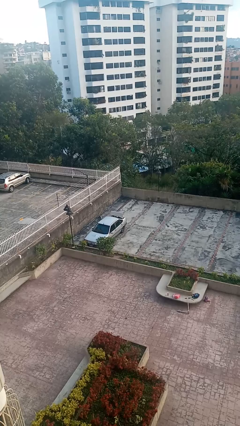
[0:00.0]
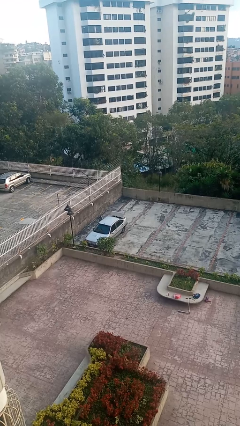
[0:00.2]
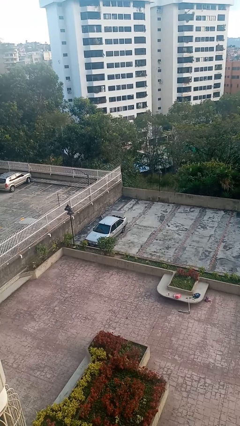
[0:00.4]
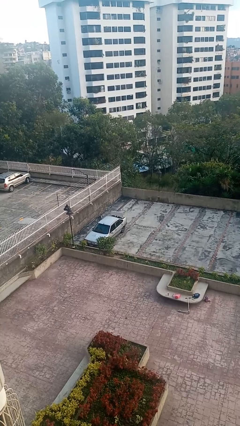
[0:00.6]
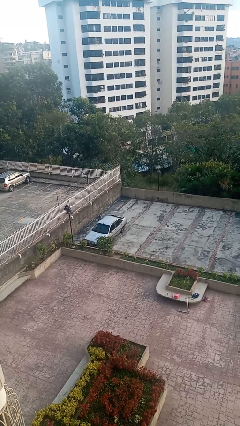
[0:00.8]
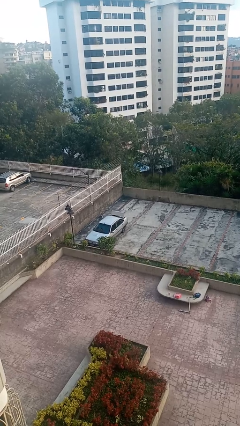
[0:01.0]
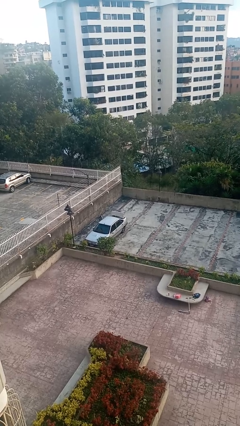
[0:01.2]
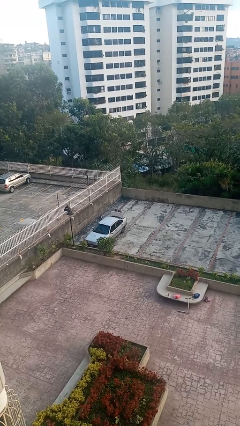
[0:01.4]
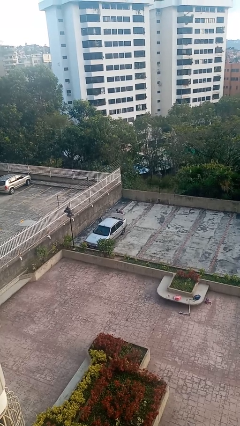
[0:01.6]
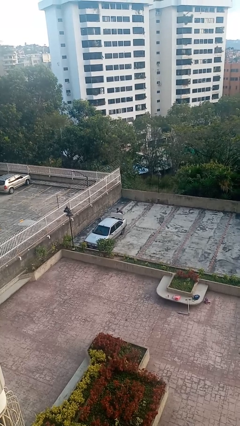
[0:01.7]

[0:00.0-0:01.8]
person unloads car

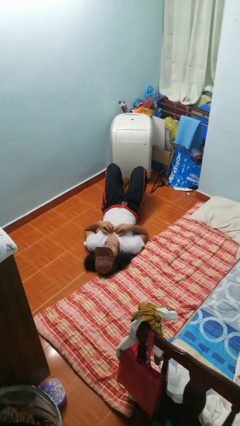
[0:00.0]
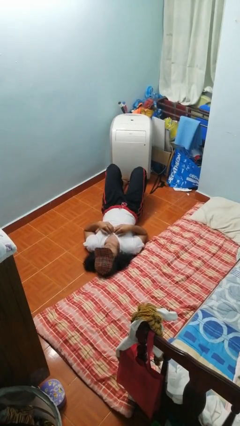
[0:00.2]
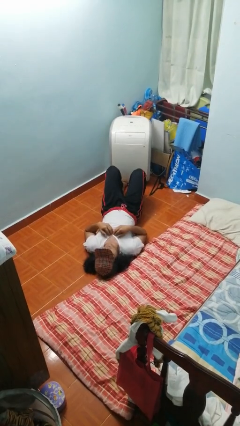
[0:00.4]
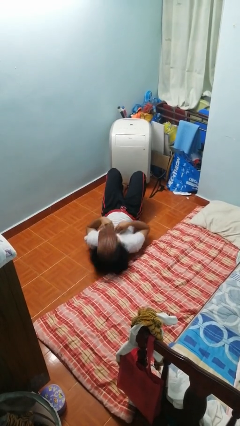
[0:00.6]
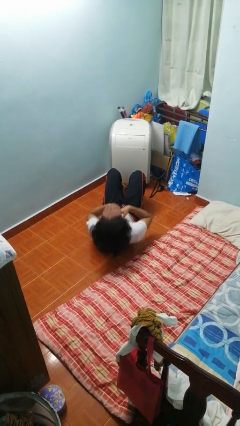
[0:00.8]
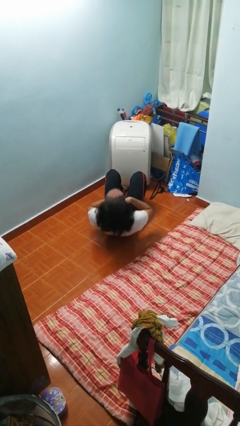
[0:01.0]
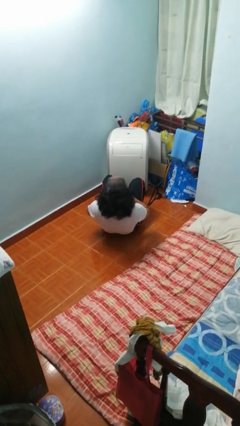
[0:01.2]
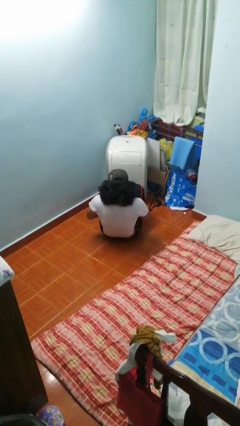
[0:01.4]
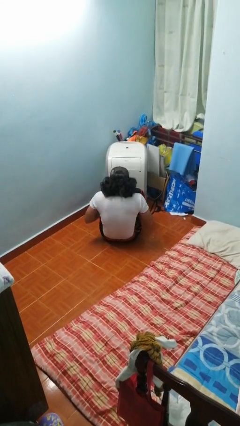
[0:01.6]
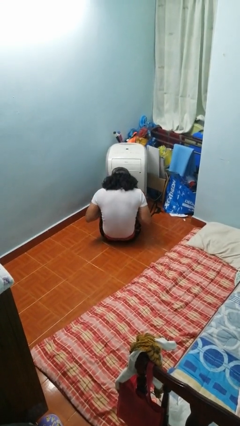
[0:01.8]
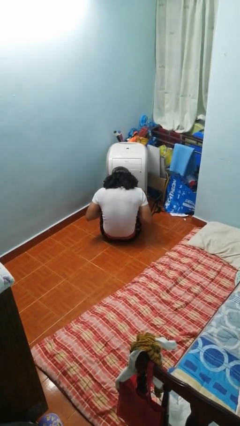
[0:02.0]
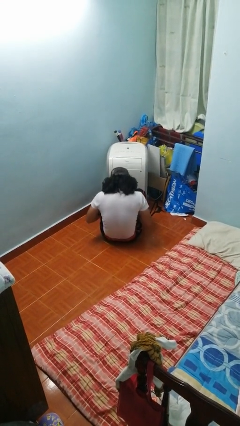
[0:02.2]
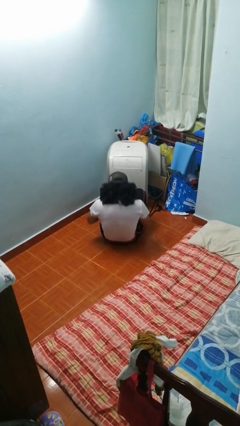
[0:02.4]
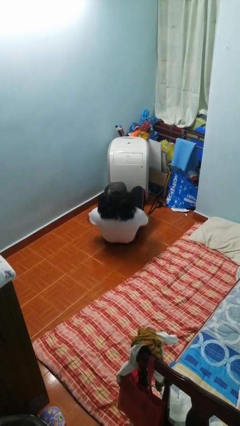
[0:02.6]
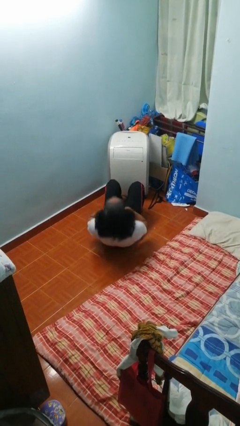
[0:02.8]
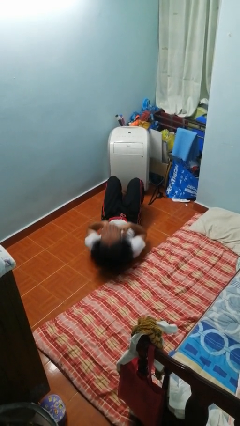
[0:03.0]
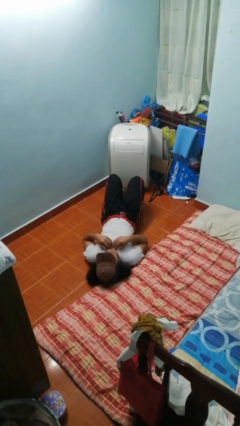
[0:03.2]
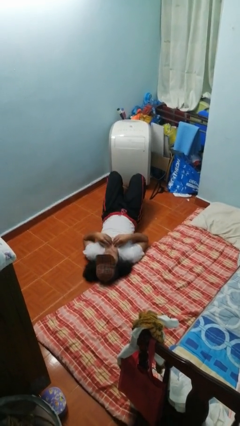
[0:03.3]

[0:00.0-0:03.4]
person exercises with situp

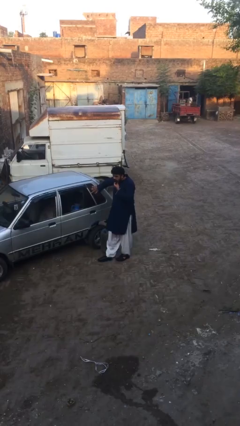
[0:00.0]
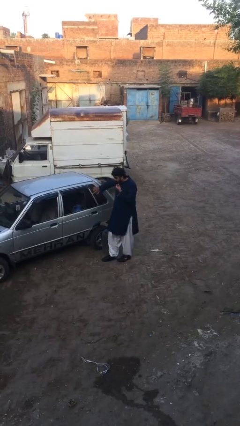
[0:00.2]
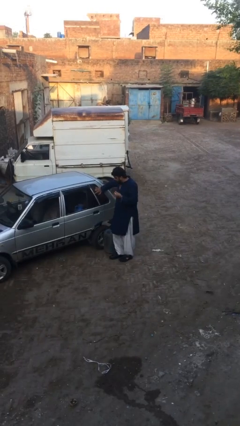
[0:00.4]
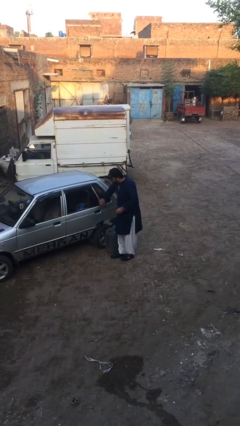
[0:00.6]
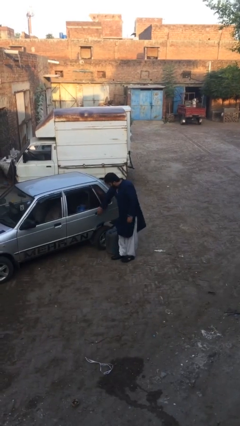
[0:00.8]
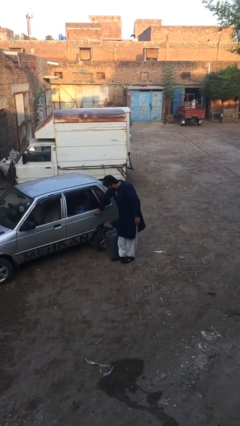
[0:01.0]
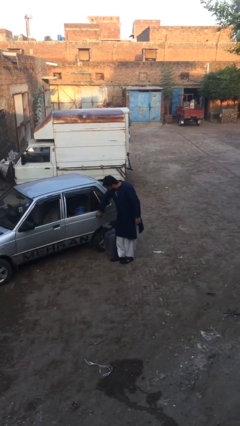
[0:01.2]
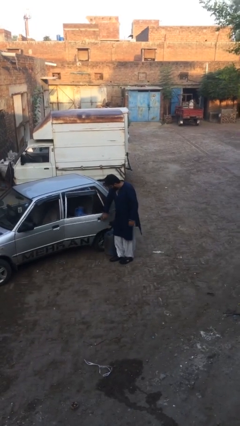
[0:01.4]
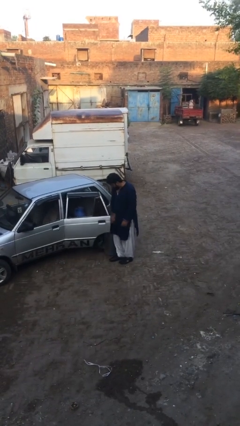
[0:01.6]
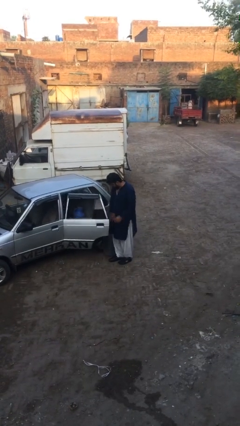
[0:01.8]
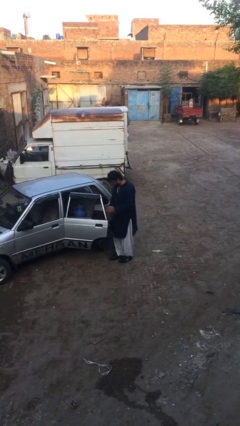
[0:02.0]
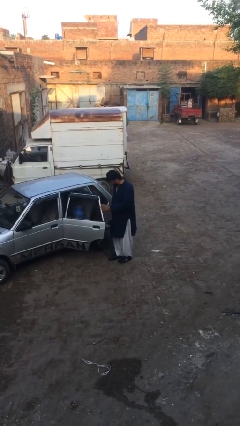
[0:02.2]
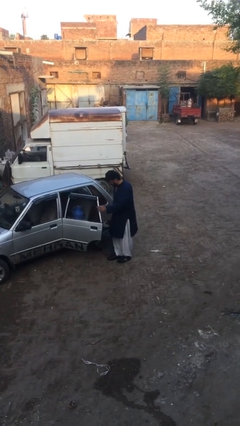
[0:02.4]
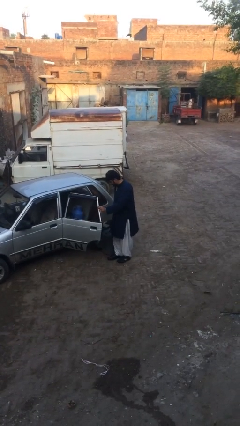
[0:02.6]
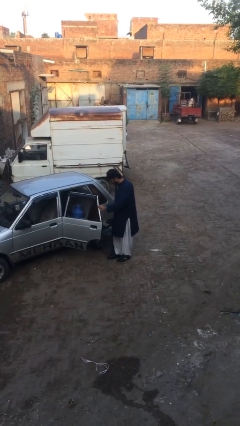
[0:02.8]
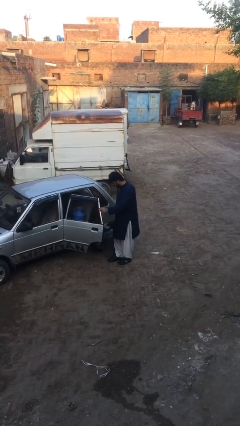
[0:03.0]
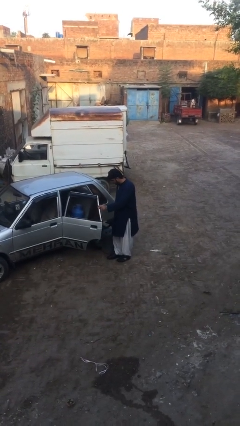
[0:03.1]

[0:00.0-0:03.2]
person opens car door

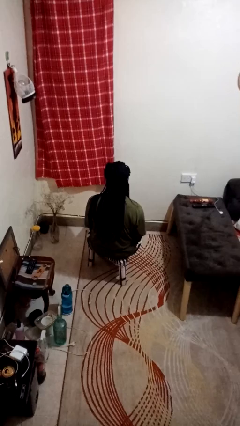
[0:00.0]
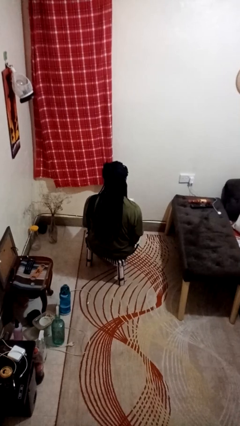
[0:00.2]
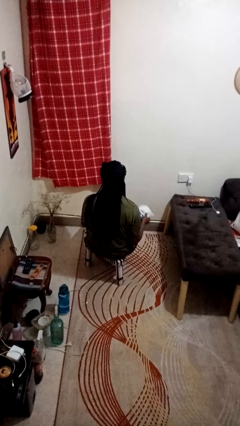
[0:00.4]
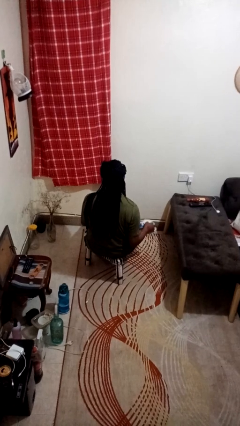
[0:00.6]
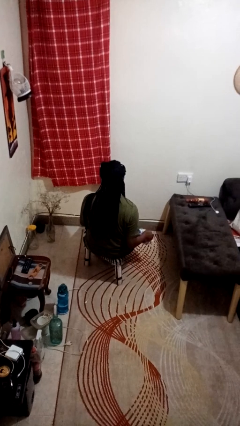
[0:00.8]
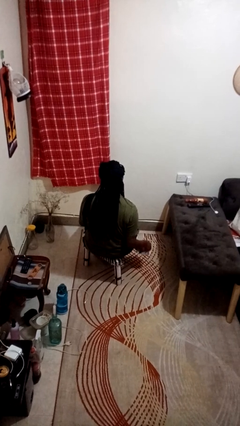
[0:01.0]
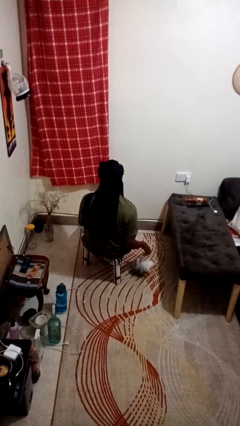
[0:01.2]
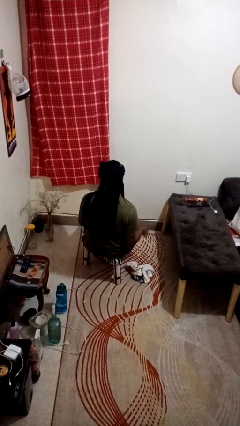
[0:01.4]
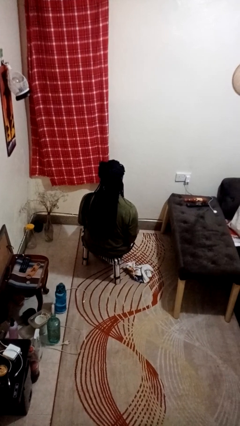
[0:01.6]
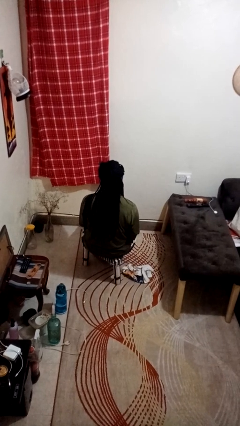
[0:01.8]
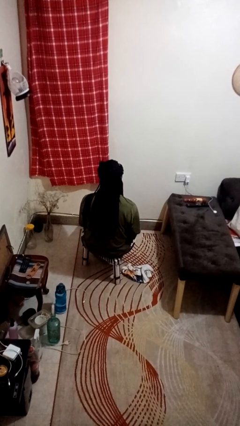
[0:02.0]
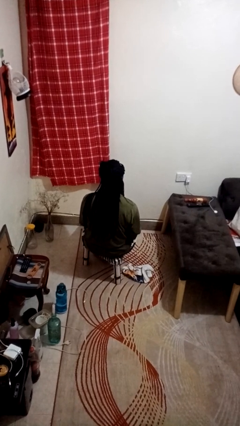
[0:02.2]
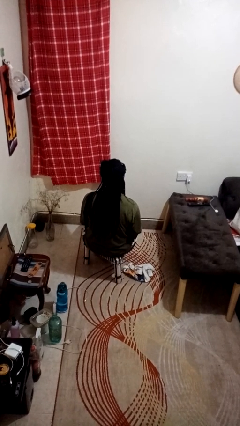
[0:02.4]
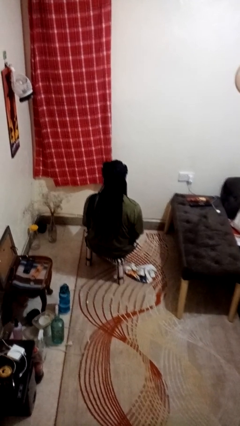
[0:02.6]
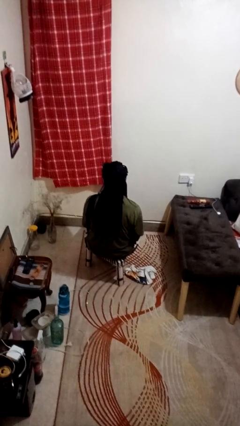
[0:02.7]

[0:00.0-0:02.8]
person throws object to ground

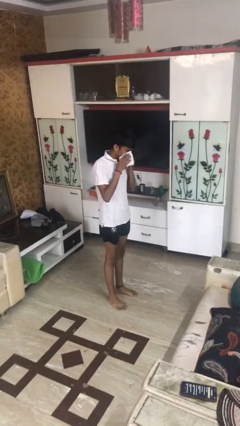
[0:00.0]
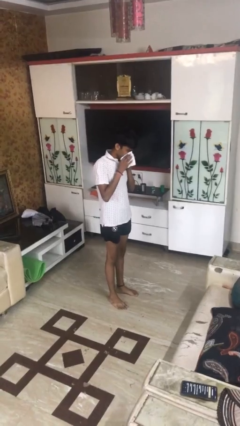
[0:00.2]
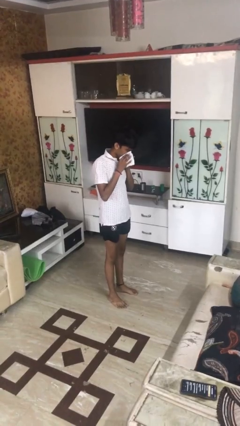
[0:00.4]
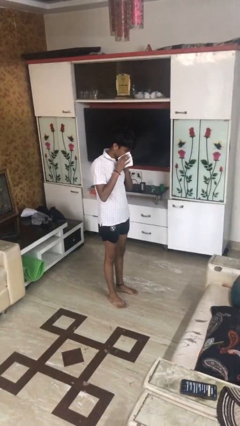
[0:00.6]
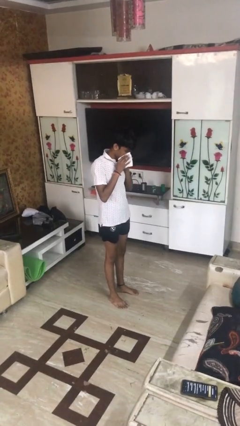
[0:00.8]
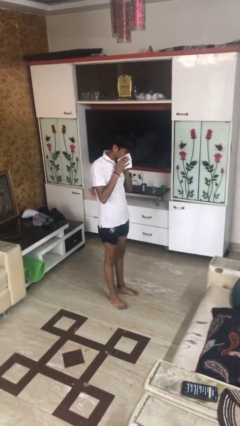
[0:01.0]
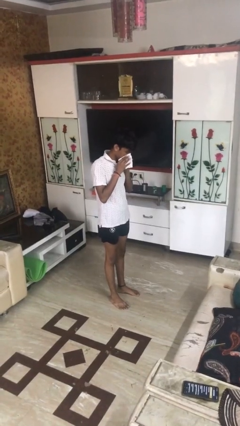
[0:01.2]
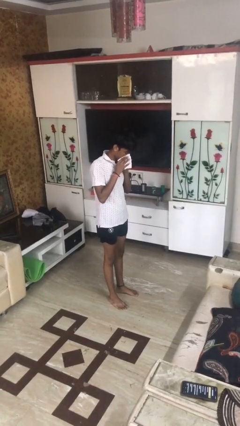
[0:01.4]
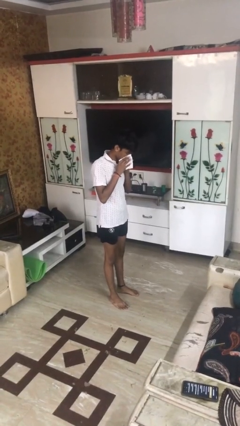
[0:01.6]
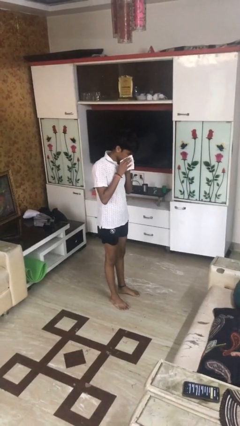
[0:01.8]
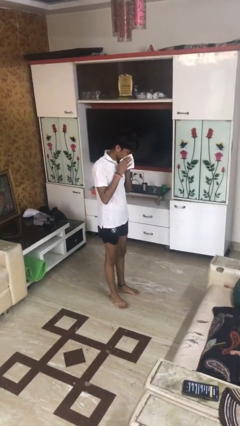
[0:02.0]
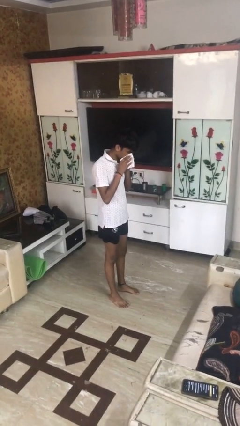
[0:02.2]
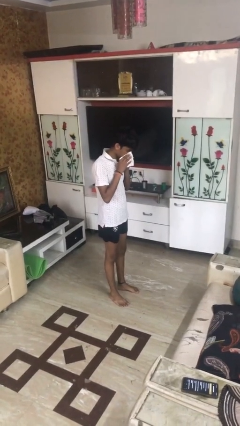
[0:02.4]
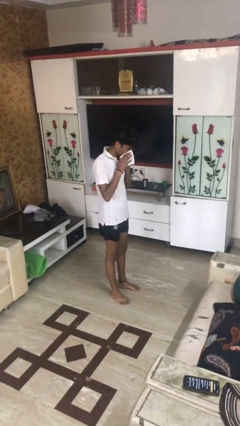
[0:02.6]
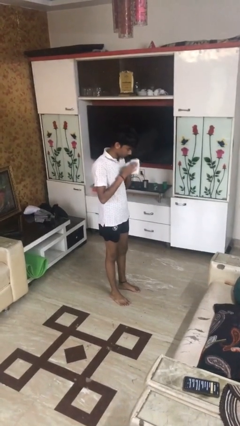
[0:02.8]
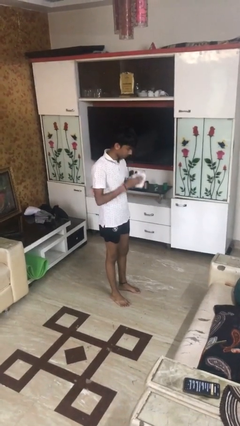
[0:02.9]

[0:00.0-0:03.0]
person blows nose

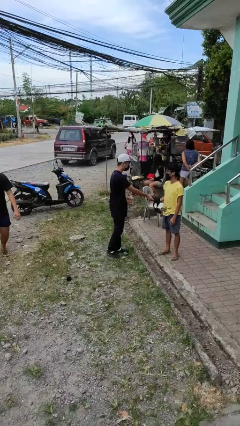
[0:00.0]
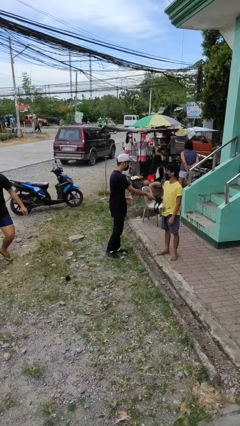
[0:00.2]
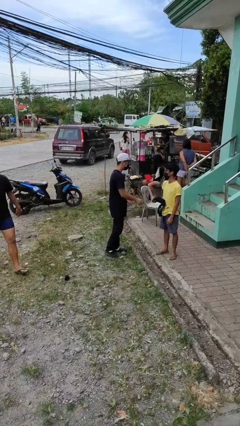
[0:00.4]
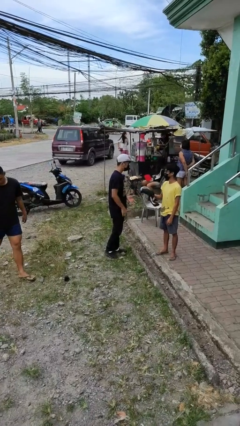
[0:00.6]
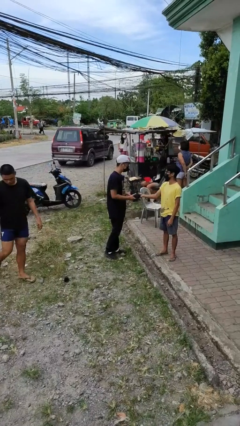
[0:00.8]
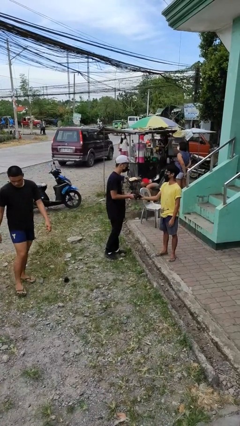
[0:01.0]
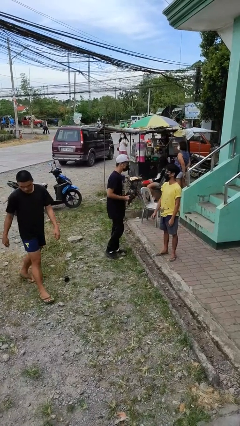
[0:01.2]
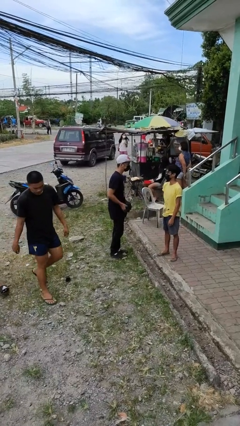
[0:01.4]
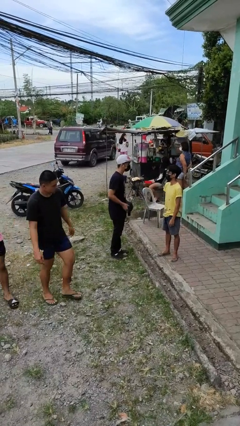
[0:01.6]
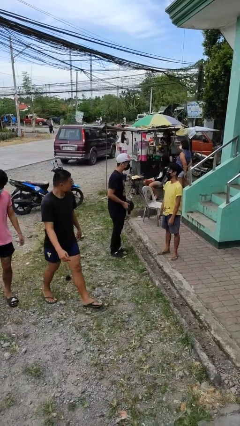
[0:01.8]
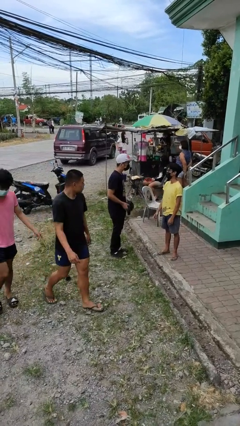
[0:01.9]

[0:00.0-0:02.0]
person transfers object to person

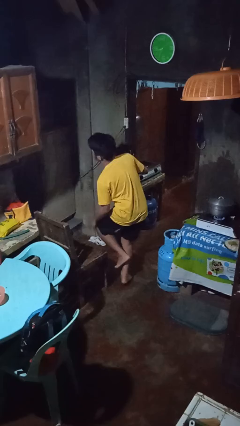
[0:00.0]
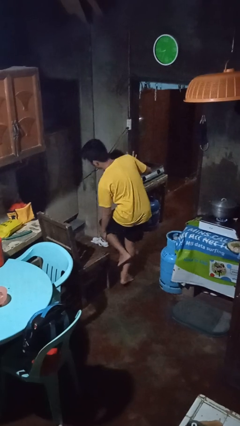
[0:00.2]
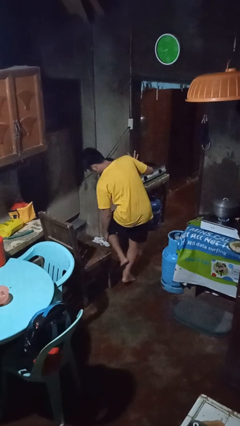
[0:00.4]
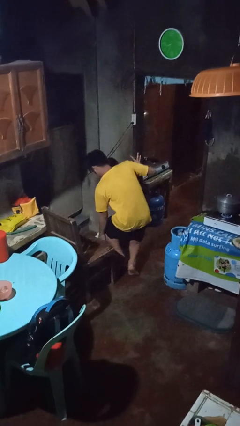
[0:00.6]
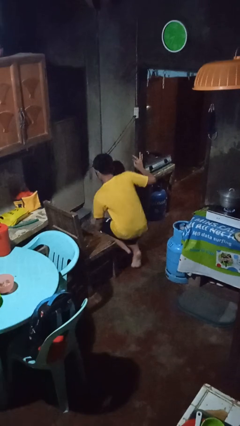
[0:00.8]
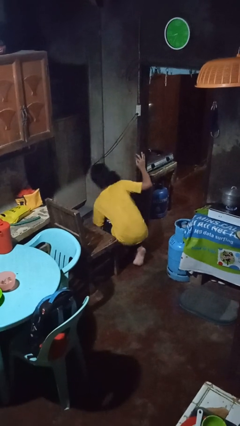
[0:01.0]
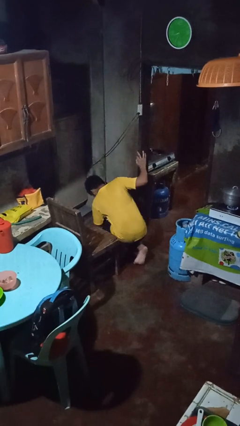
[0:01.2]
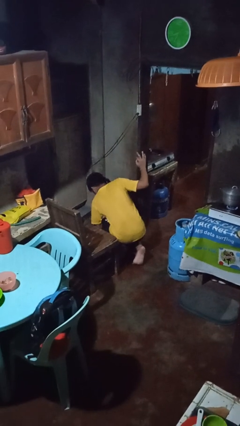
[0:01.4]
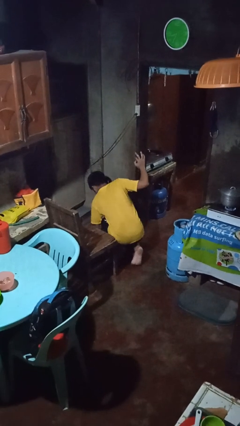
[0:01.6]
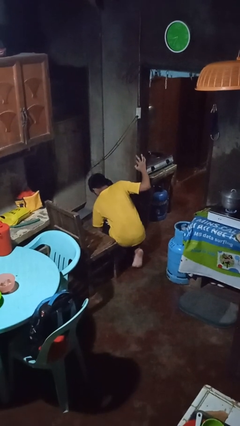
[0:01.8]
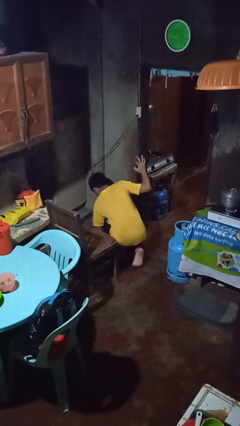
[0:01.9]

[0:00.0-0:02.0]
person lies down on floor
